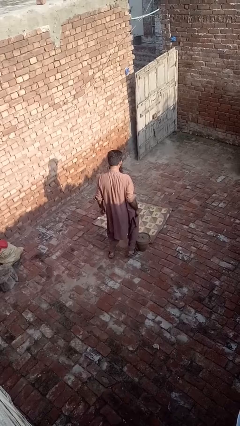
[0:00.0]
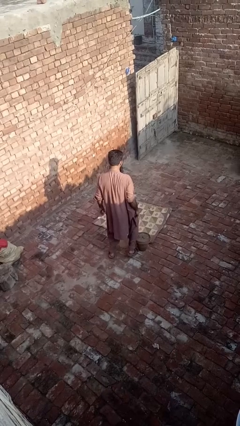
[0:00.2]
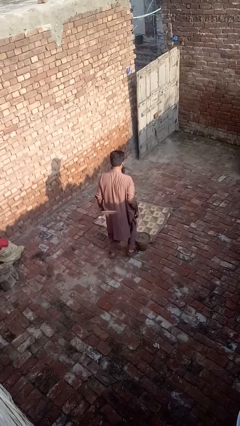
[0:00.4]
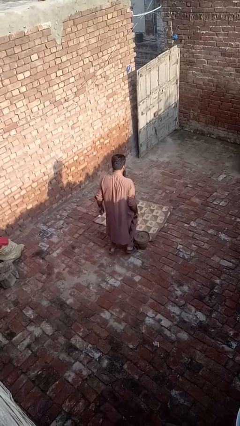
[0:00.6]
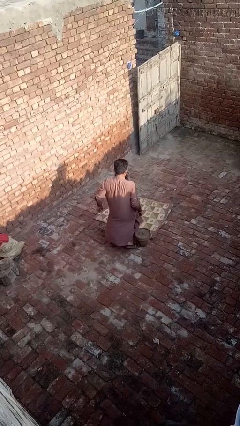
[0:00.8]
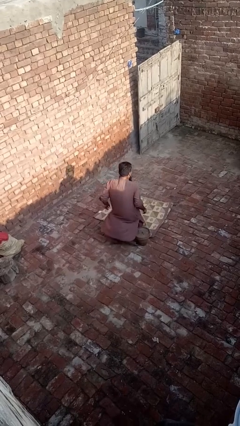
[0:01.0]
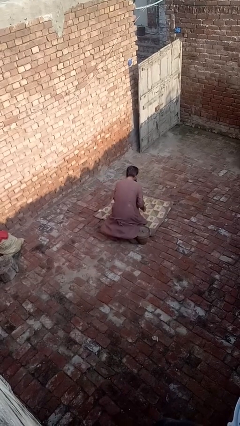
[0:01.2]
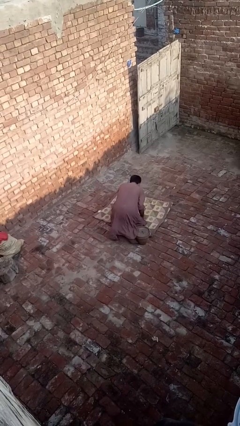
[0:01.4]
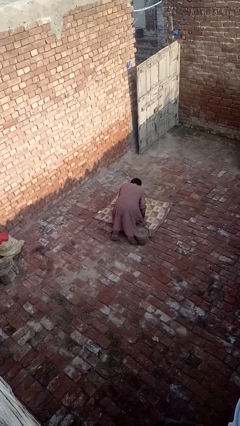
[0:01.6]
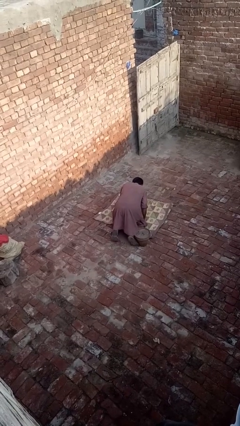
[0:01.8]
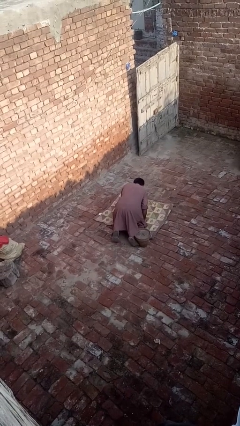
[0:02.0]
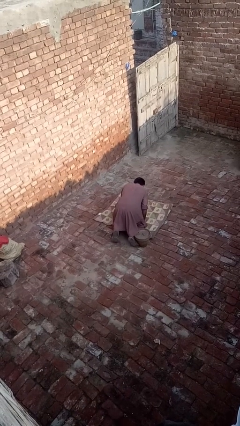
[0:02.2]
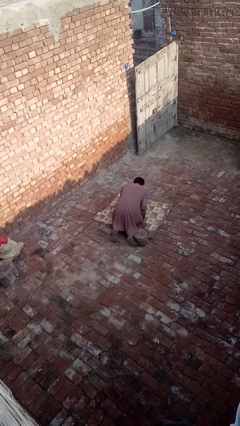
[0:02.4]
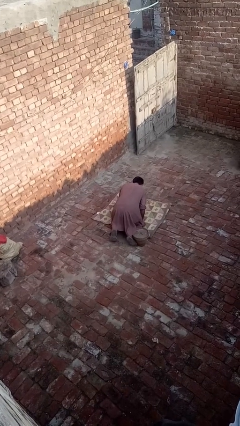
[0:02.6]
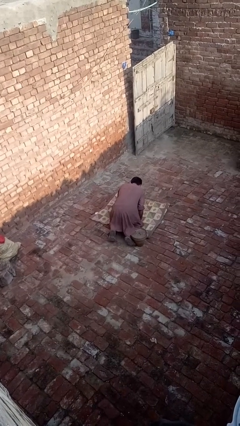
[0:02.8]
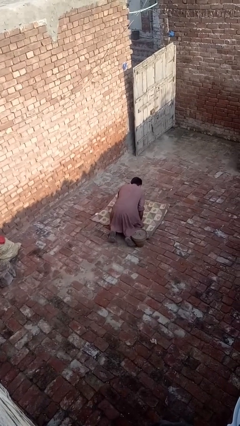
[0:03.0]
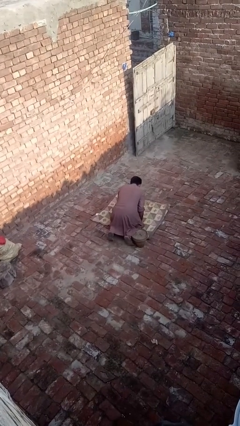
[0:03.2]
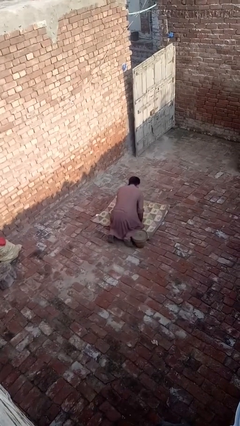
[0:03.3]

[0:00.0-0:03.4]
person lies down on floor

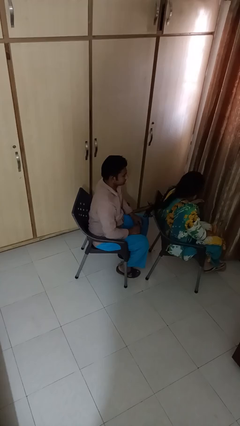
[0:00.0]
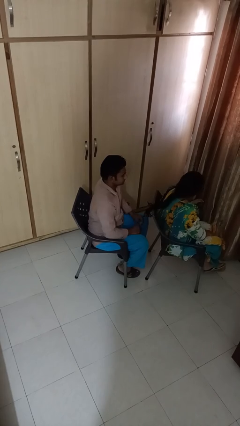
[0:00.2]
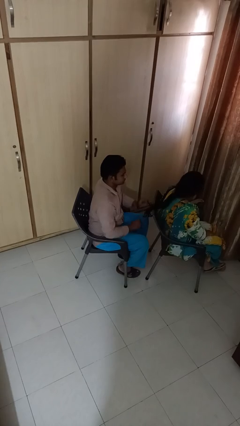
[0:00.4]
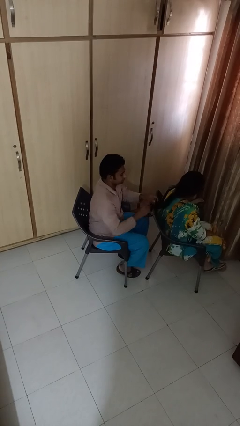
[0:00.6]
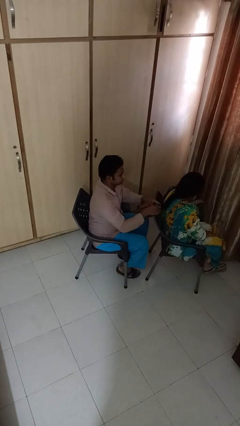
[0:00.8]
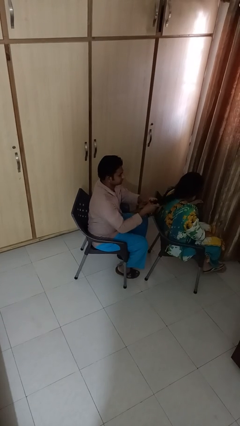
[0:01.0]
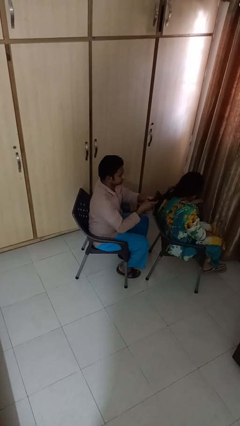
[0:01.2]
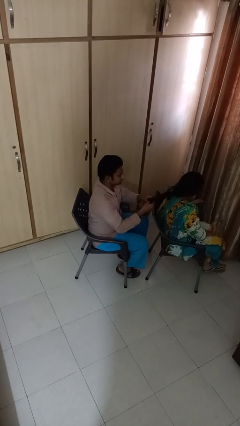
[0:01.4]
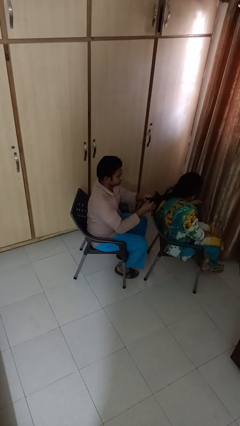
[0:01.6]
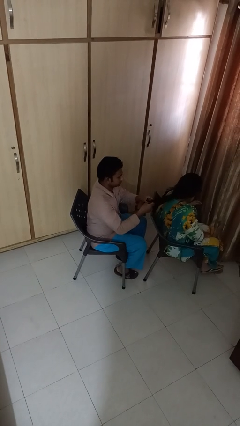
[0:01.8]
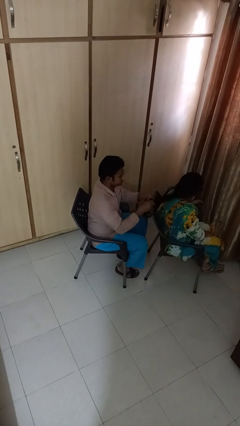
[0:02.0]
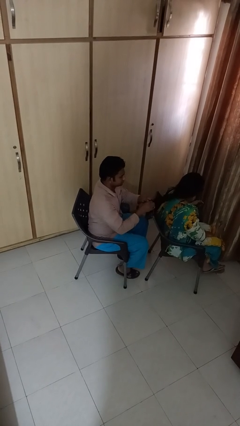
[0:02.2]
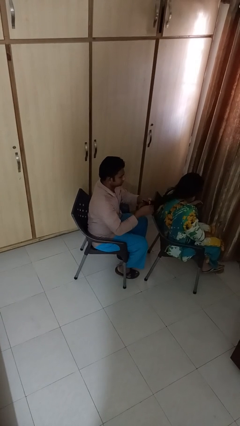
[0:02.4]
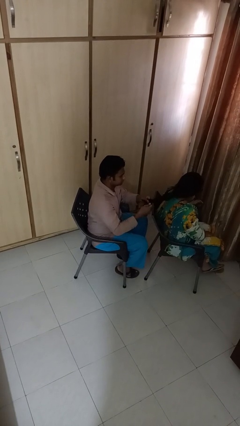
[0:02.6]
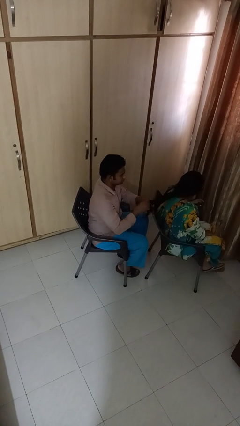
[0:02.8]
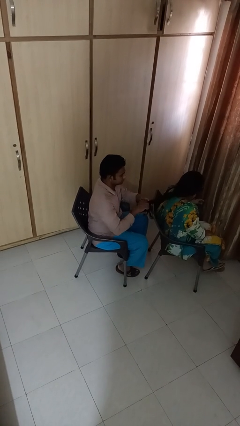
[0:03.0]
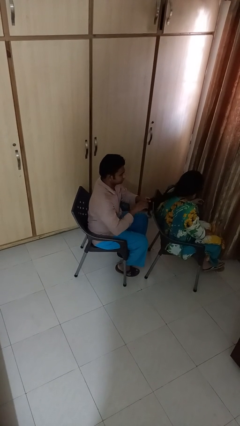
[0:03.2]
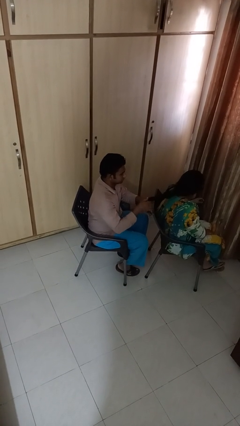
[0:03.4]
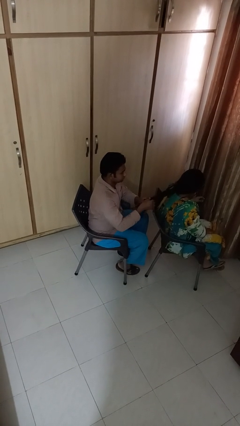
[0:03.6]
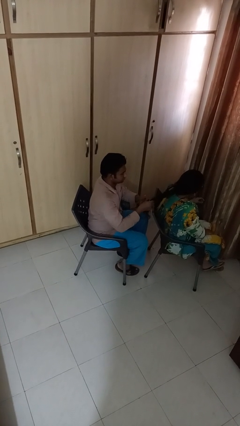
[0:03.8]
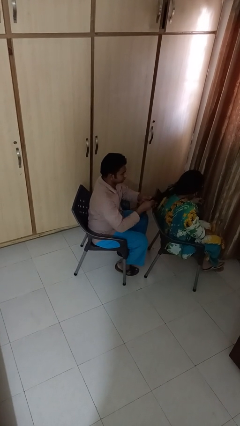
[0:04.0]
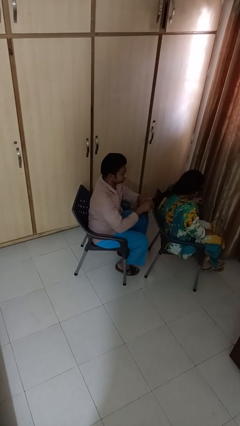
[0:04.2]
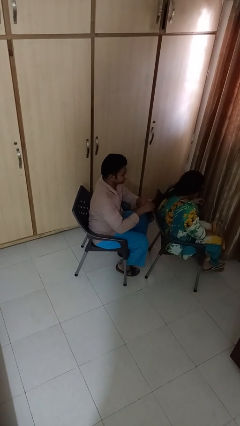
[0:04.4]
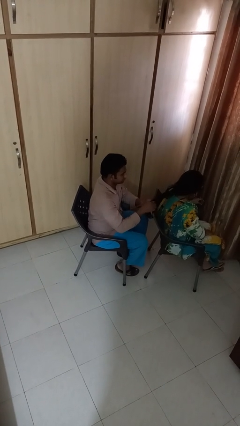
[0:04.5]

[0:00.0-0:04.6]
person braids hair of person

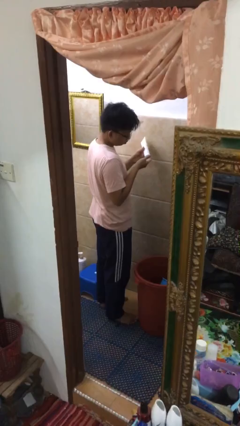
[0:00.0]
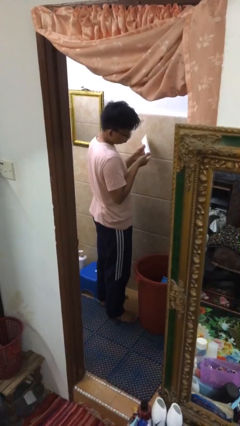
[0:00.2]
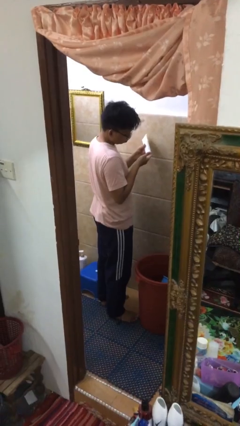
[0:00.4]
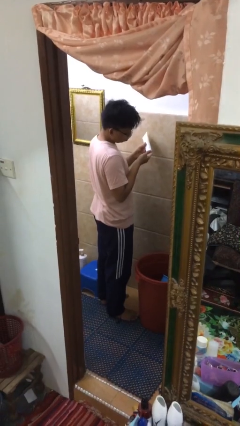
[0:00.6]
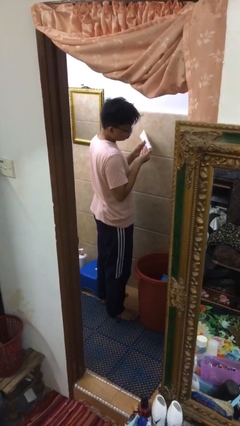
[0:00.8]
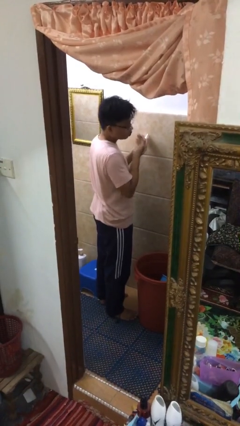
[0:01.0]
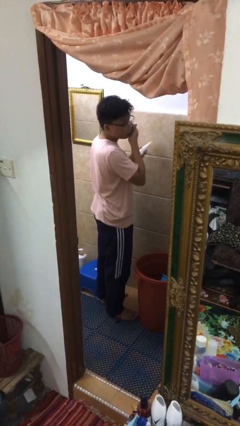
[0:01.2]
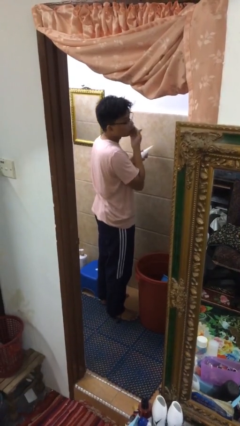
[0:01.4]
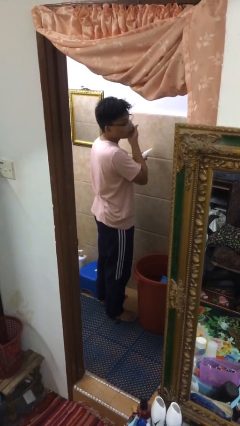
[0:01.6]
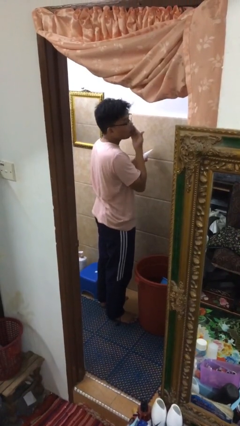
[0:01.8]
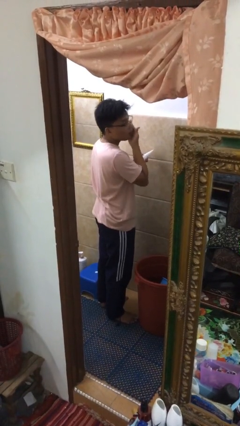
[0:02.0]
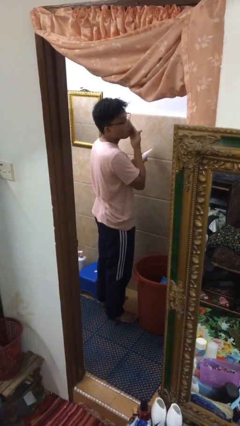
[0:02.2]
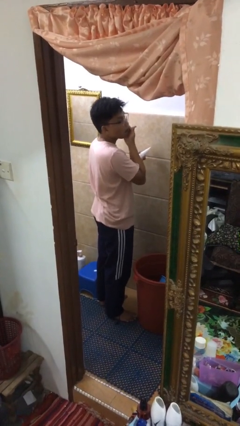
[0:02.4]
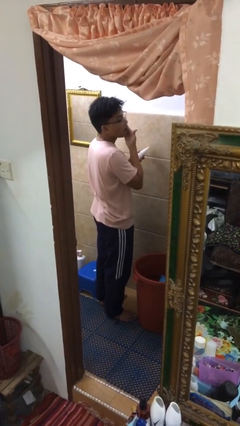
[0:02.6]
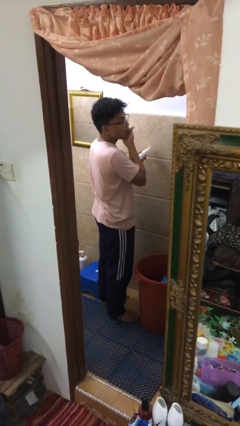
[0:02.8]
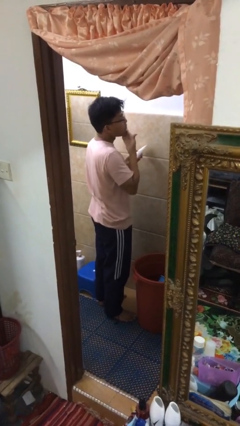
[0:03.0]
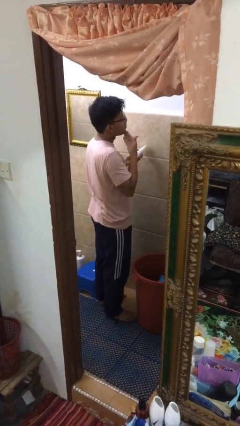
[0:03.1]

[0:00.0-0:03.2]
person applies facial moisturizer

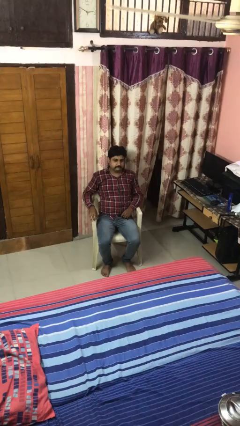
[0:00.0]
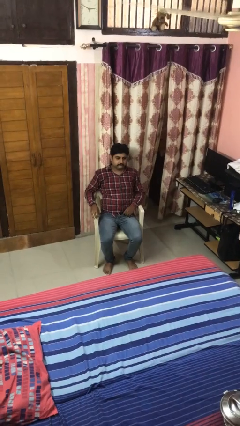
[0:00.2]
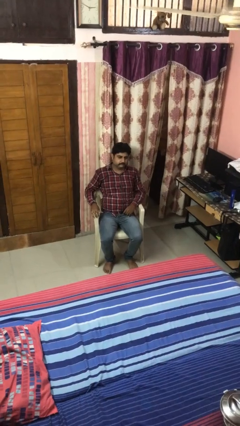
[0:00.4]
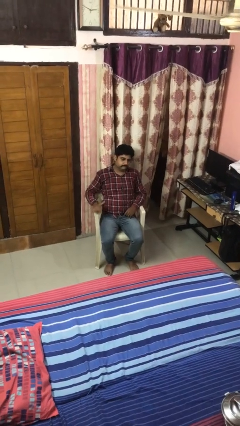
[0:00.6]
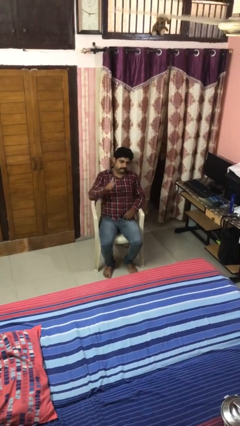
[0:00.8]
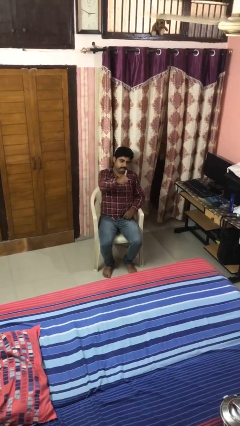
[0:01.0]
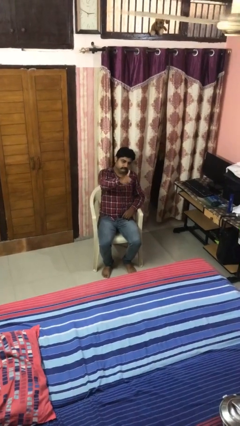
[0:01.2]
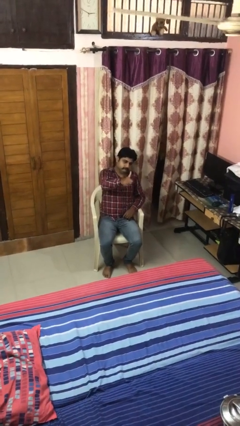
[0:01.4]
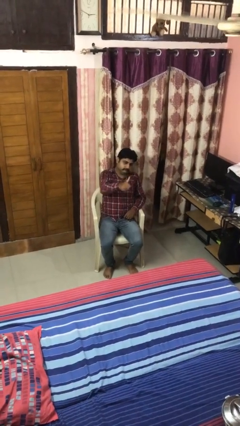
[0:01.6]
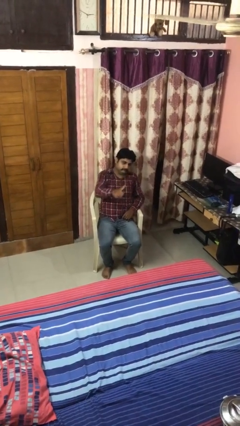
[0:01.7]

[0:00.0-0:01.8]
person gestures thumbs up

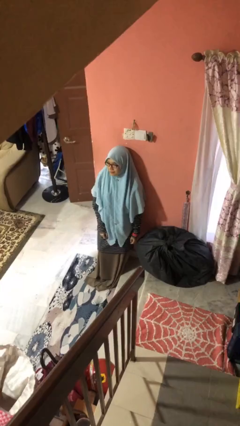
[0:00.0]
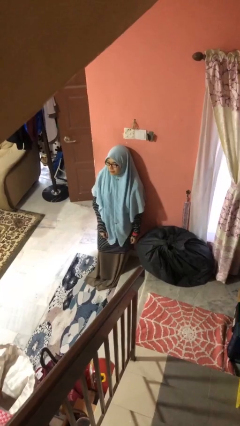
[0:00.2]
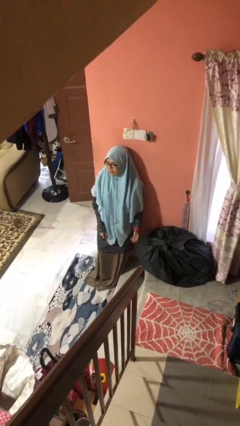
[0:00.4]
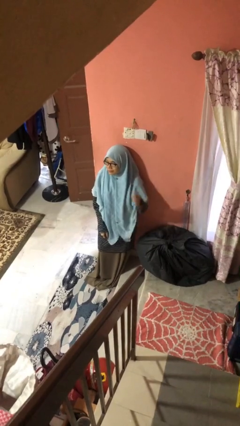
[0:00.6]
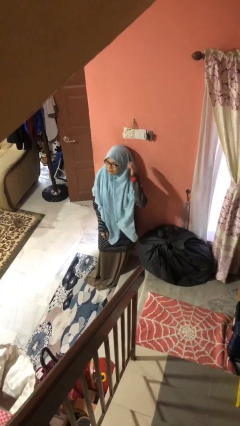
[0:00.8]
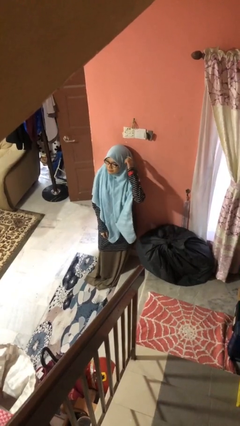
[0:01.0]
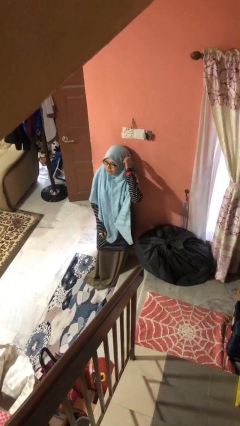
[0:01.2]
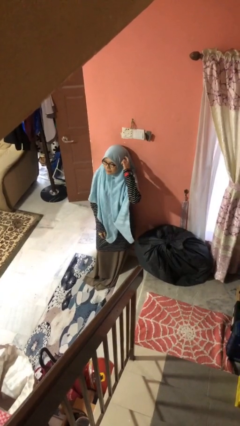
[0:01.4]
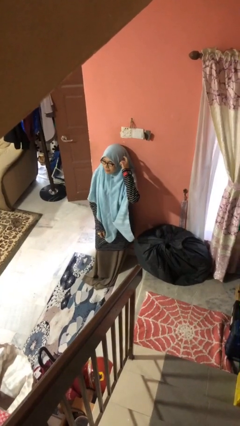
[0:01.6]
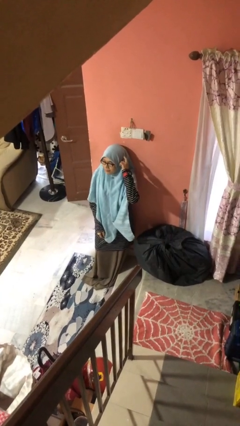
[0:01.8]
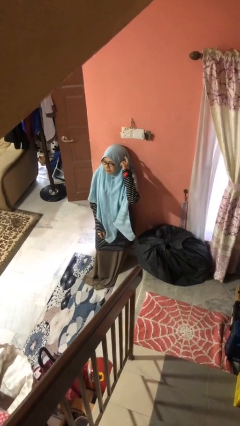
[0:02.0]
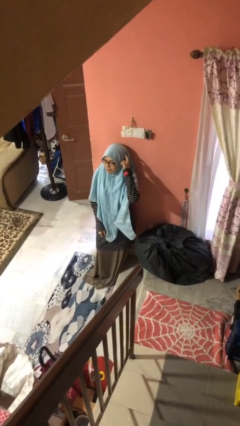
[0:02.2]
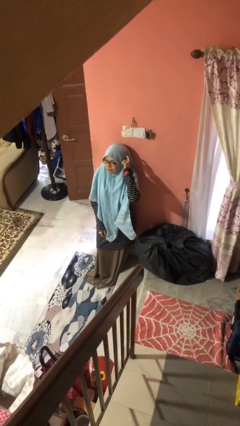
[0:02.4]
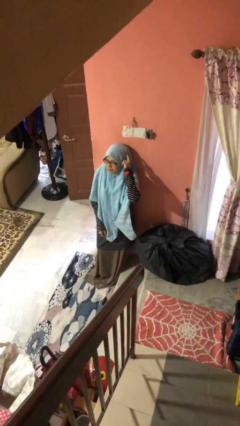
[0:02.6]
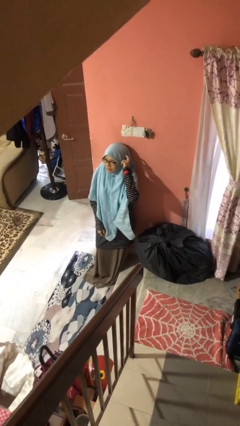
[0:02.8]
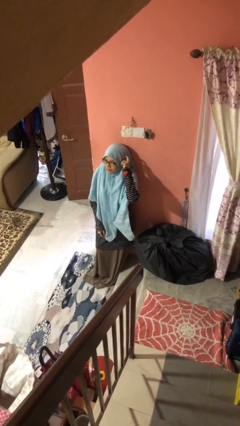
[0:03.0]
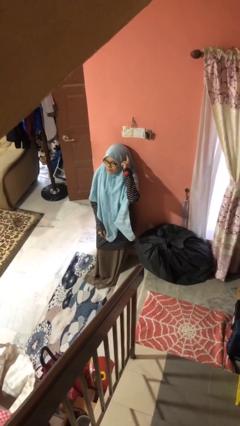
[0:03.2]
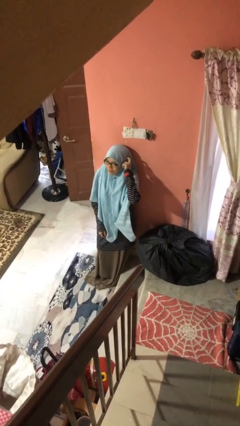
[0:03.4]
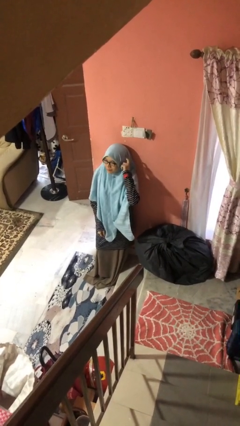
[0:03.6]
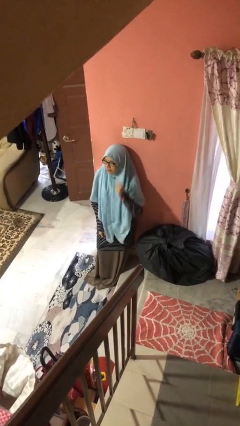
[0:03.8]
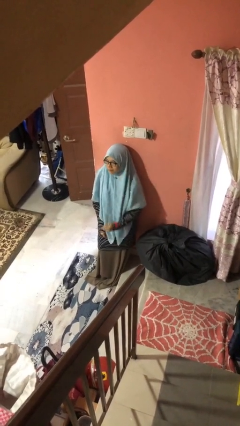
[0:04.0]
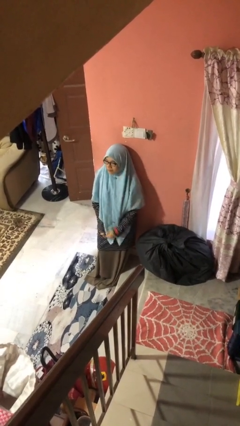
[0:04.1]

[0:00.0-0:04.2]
person scratches face

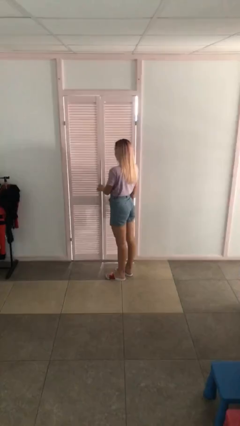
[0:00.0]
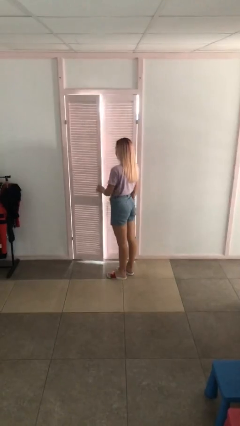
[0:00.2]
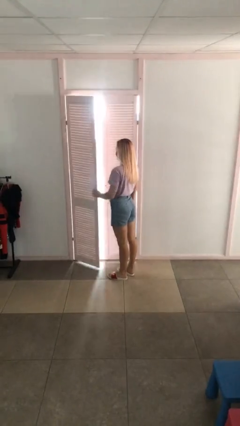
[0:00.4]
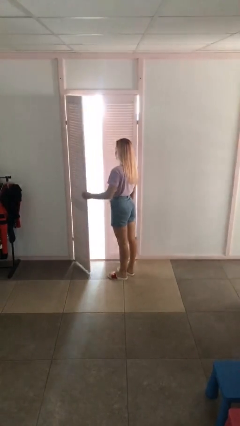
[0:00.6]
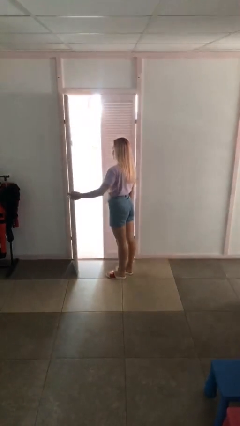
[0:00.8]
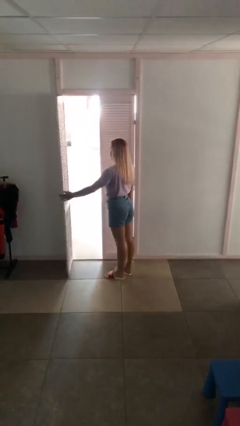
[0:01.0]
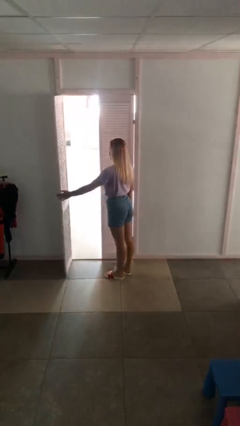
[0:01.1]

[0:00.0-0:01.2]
person opens facility door
